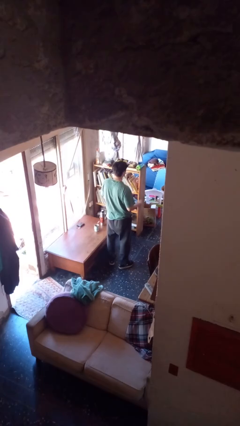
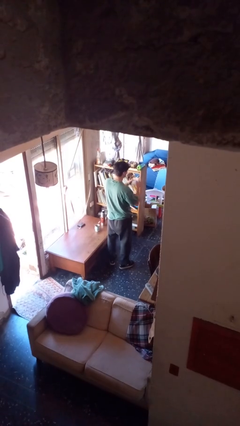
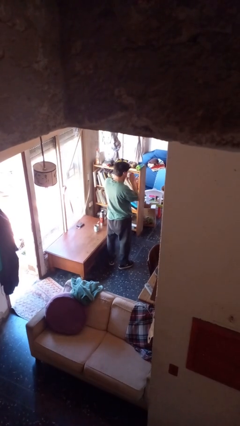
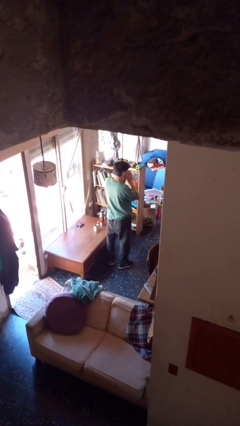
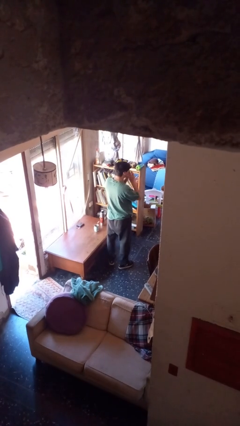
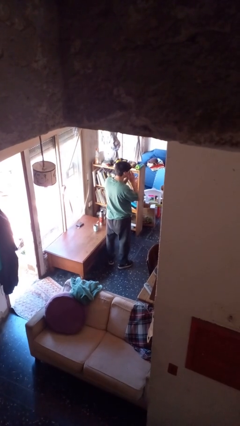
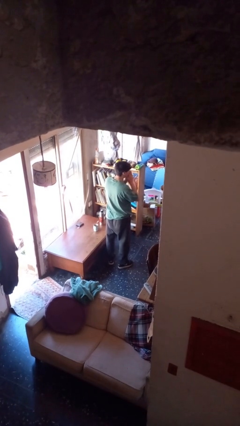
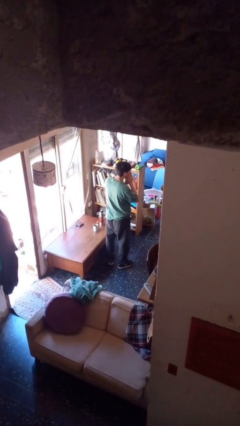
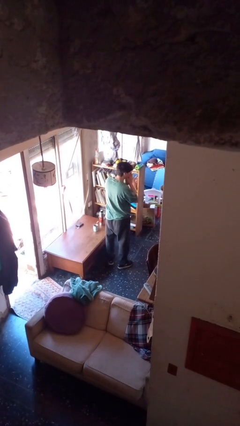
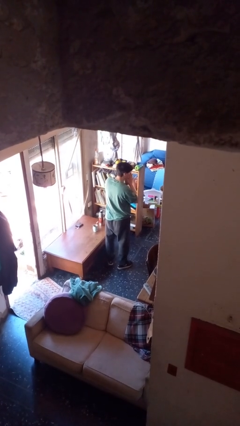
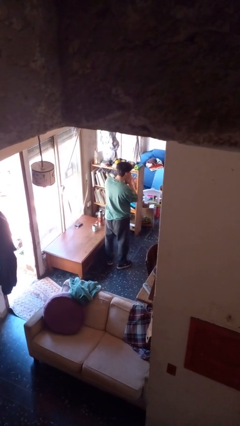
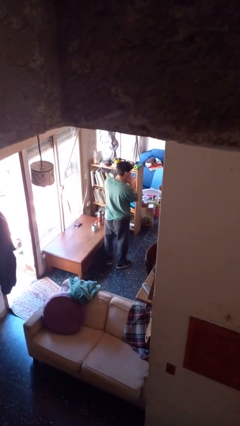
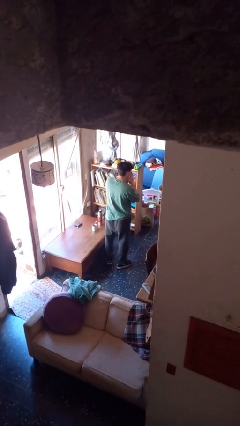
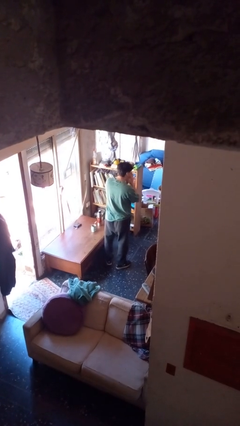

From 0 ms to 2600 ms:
person blows nose

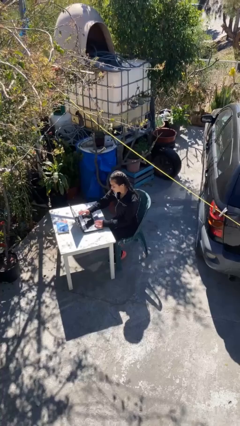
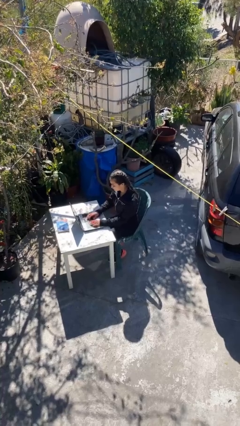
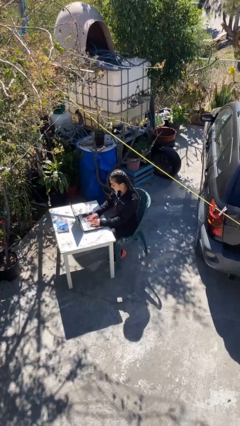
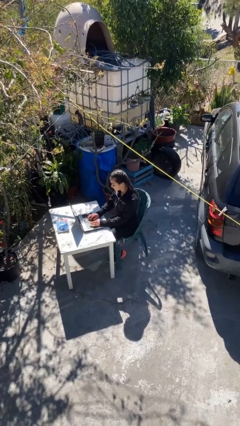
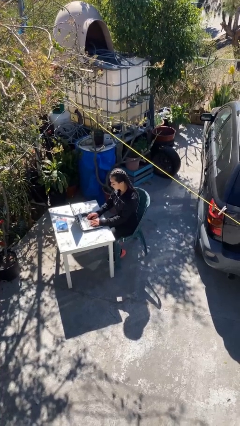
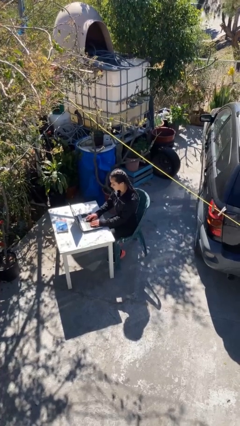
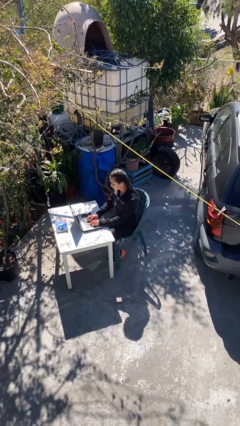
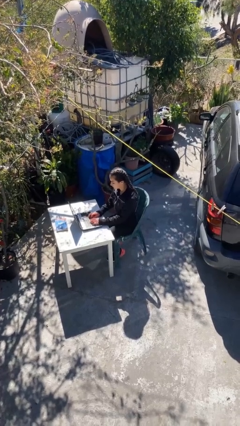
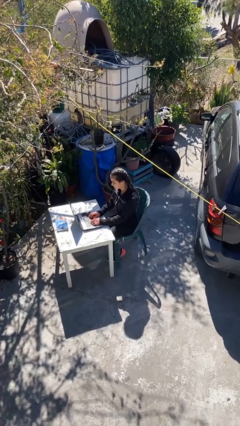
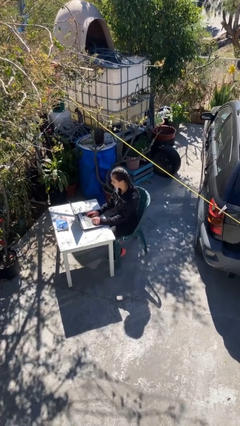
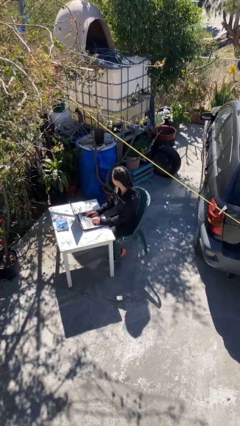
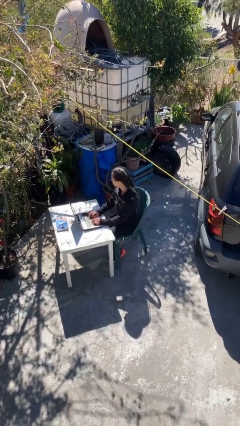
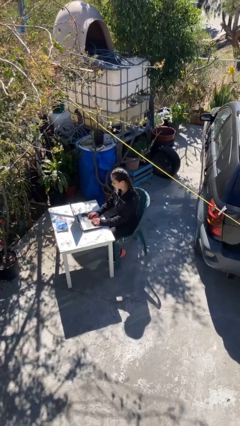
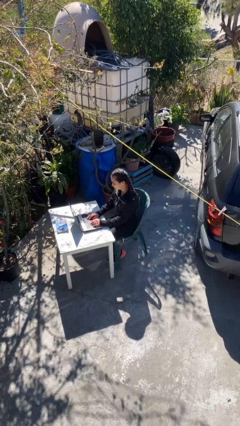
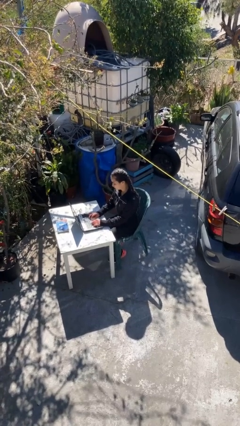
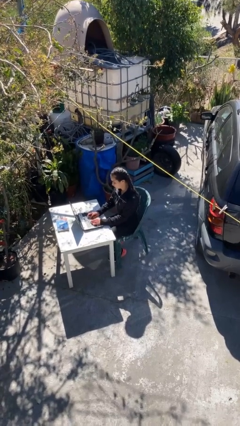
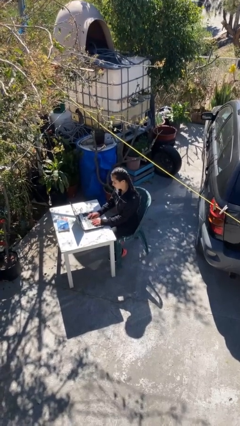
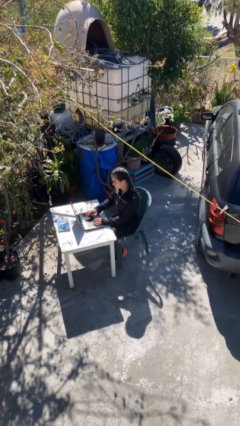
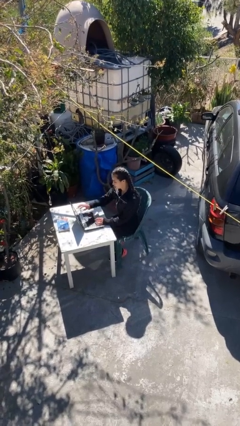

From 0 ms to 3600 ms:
person interacts with laptop

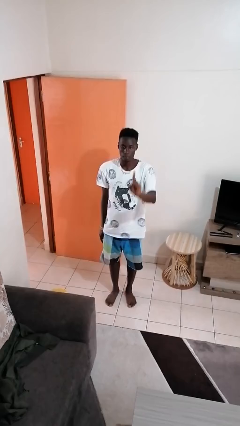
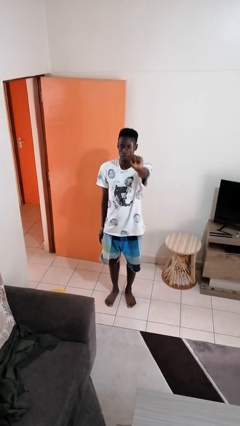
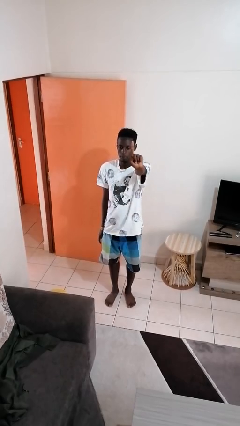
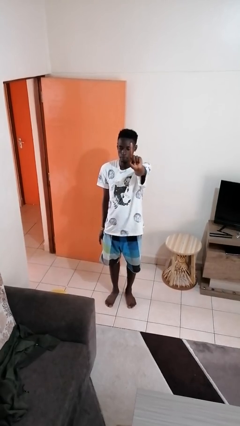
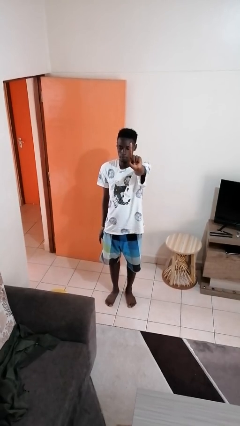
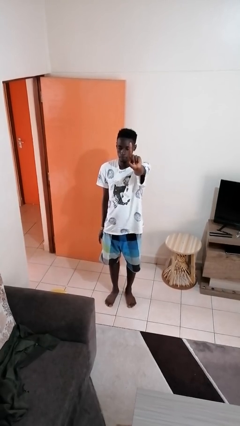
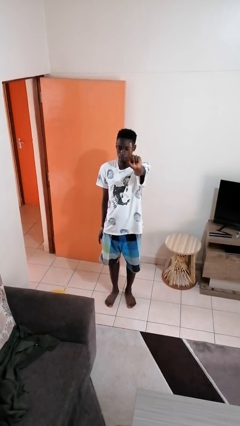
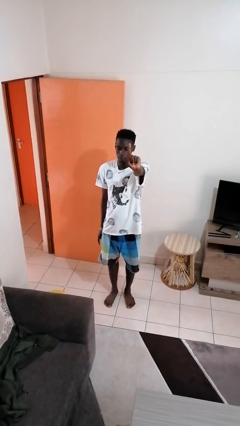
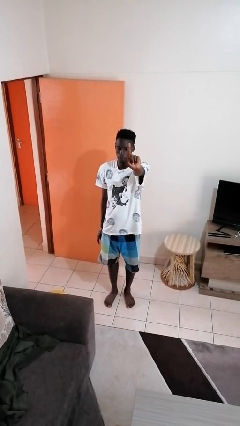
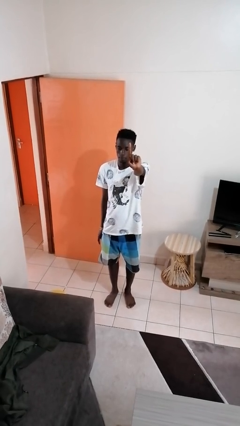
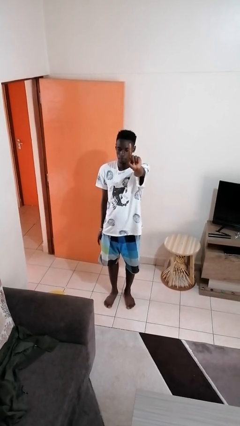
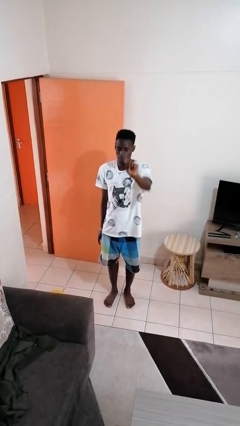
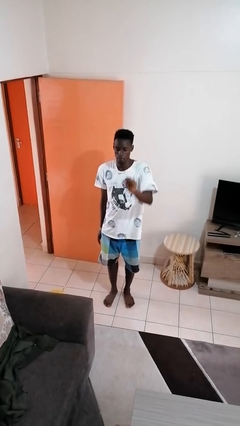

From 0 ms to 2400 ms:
person gestures number one

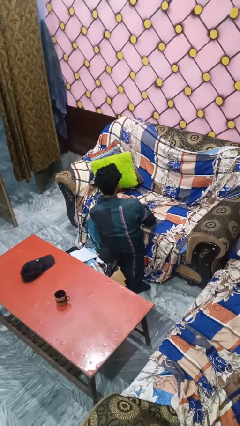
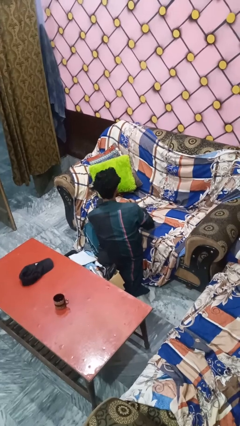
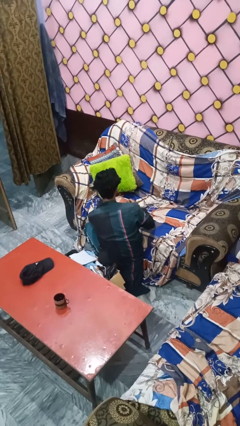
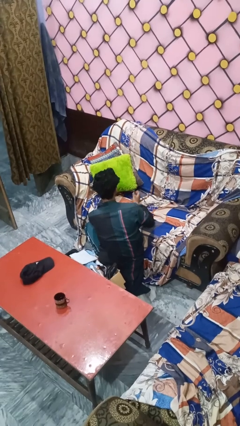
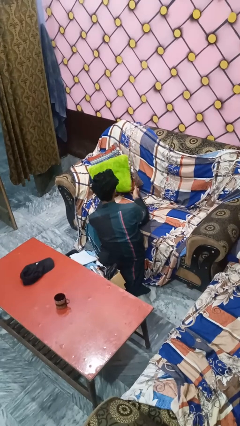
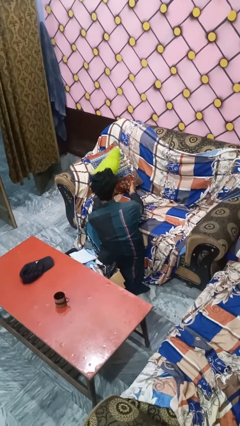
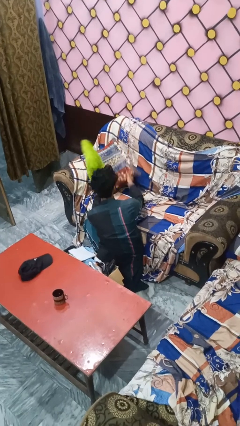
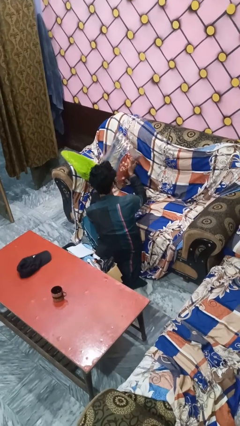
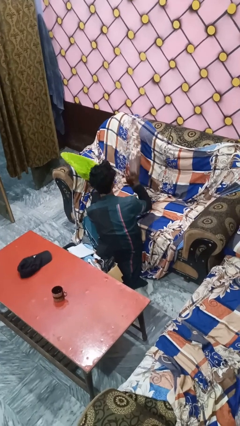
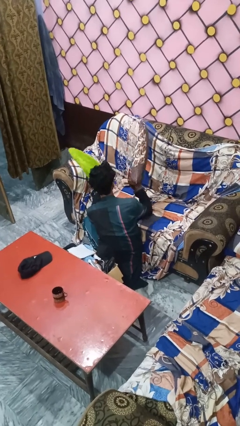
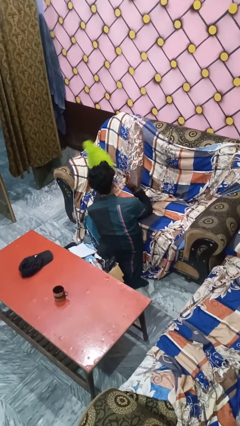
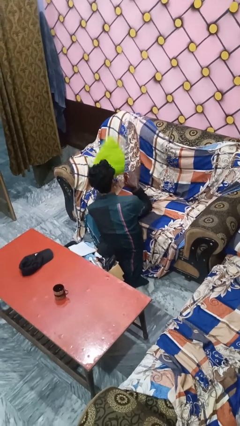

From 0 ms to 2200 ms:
person searches in couch

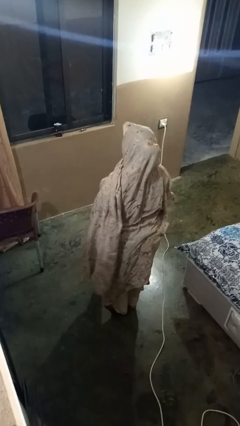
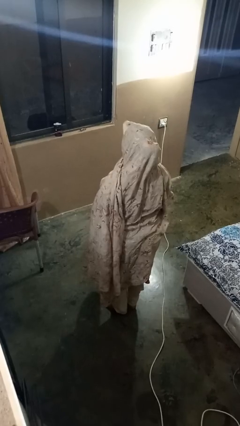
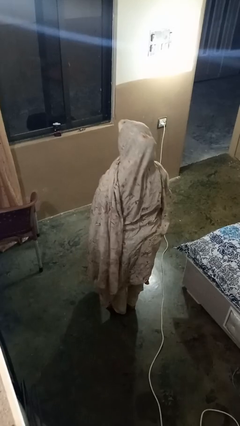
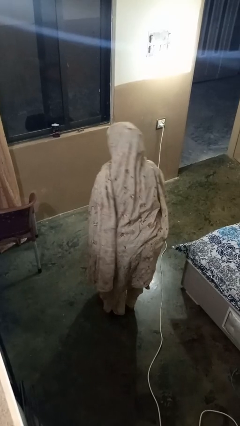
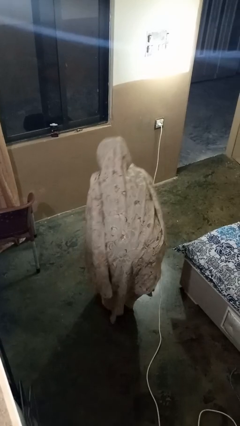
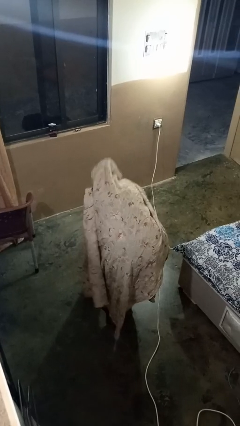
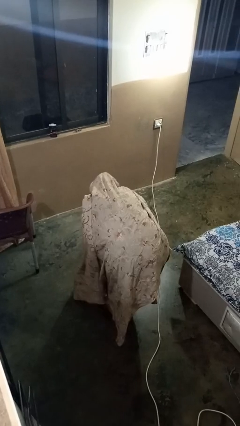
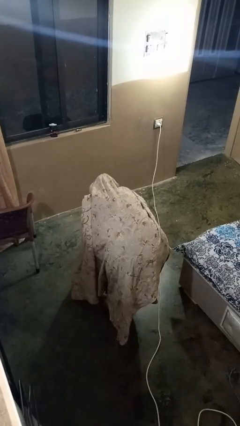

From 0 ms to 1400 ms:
person bows

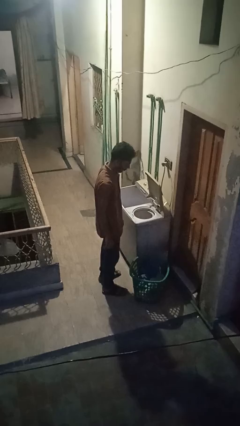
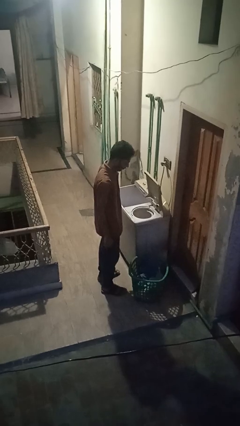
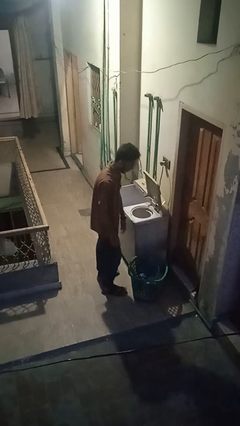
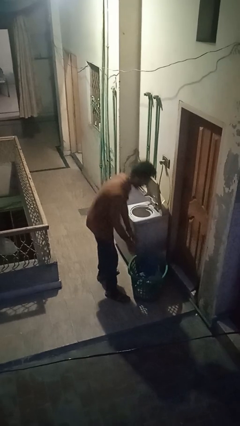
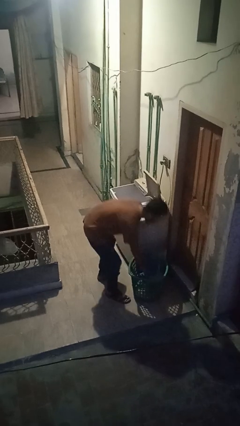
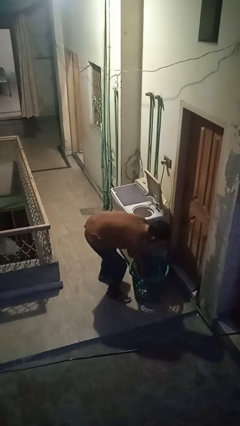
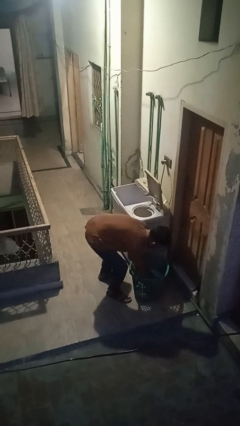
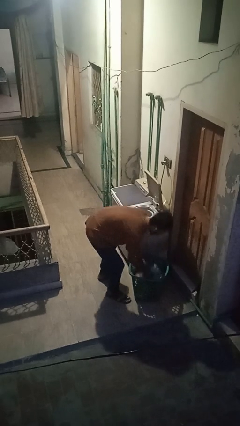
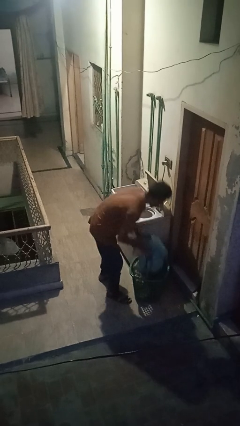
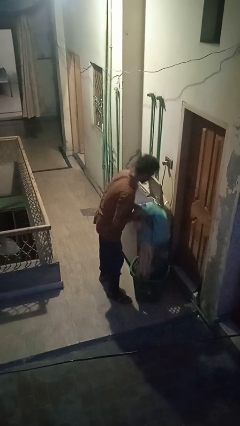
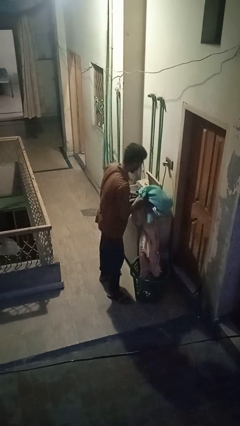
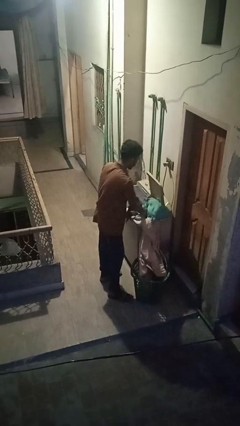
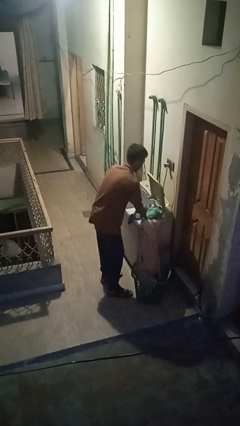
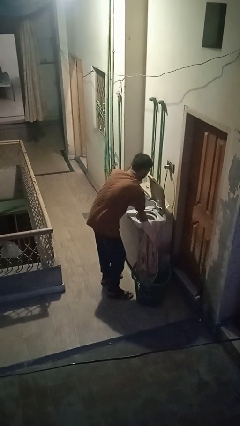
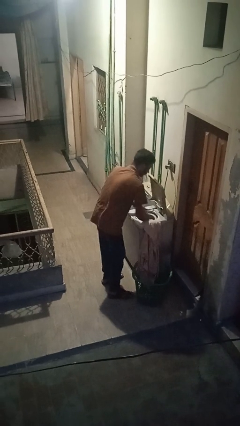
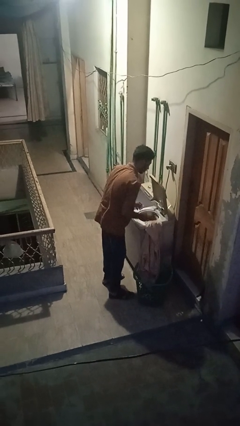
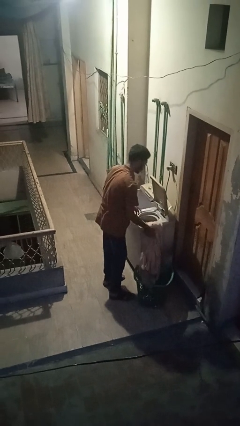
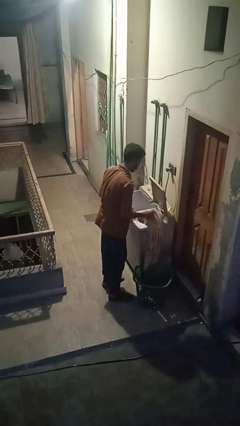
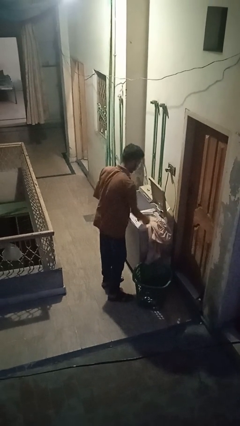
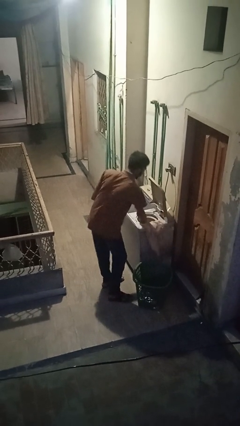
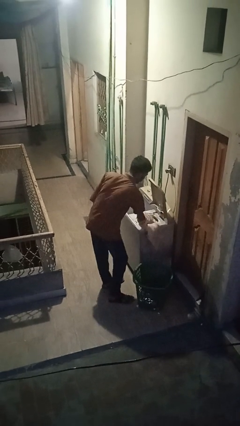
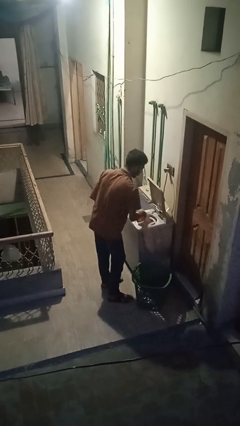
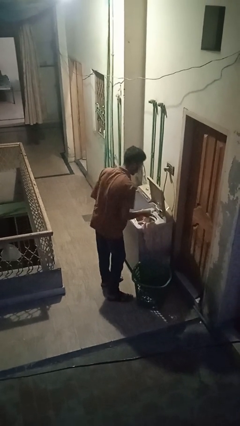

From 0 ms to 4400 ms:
person loads dryer

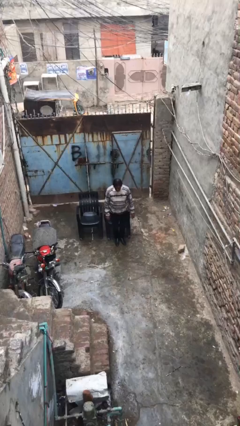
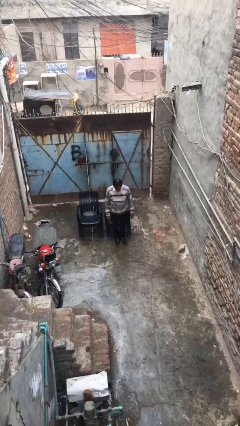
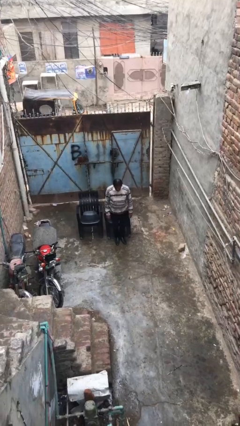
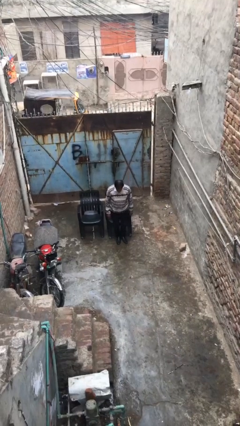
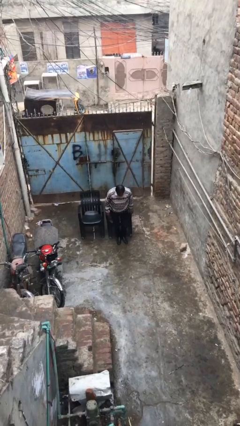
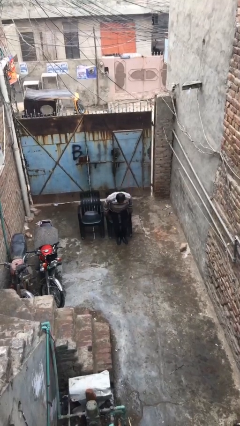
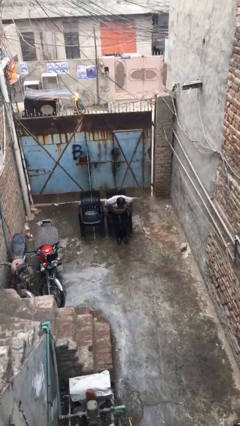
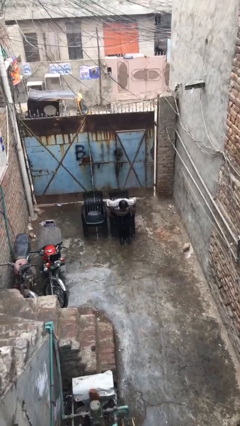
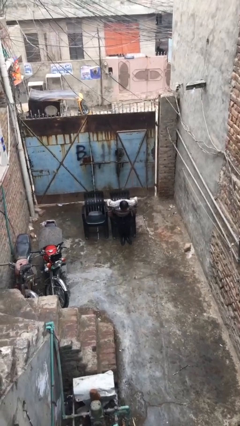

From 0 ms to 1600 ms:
person sits down
